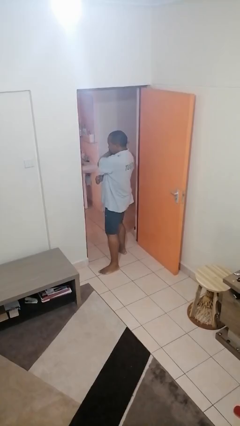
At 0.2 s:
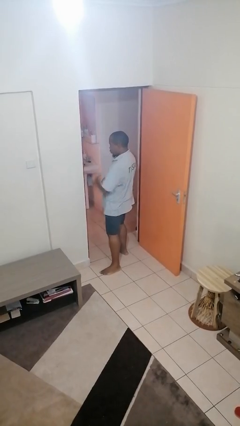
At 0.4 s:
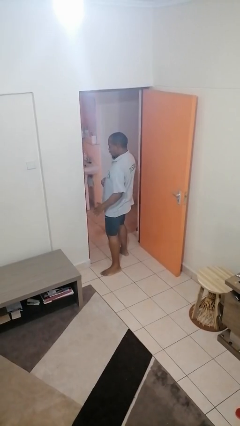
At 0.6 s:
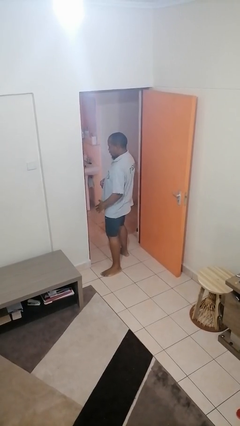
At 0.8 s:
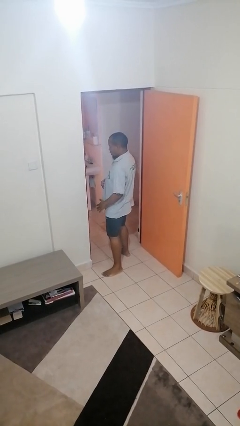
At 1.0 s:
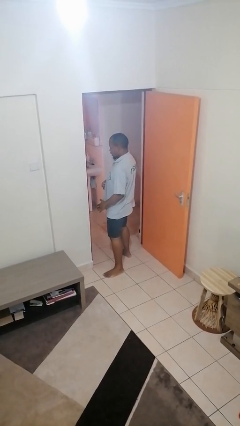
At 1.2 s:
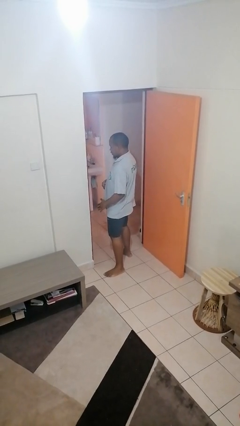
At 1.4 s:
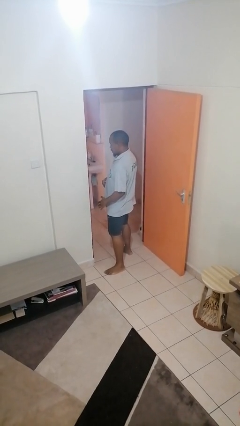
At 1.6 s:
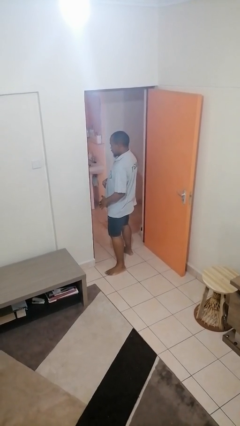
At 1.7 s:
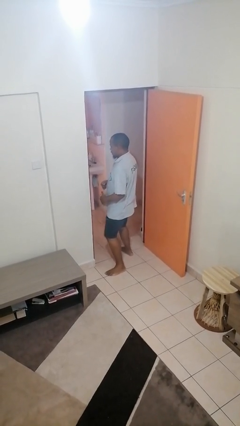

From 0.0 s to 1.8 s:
person karate chop

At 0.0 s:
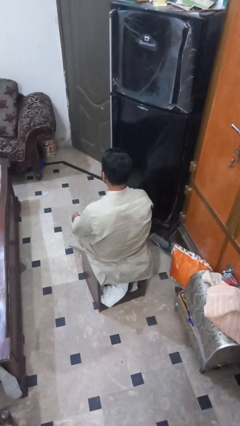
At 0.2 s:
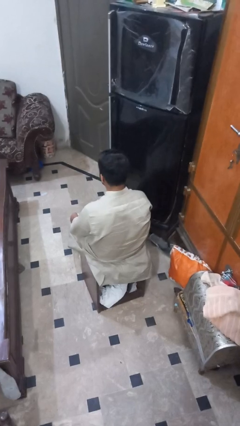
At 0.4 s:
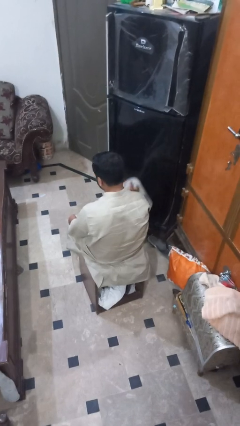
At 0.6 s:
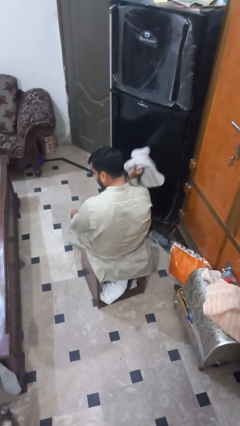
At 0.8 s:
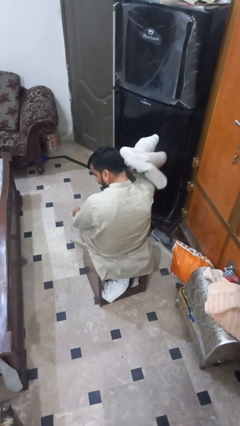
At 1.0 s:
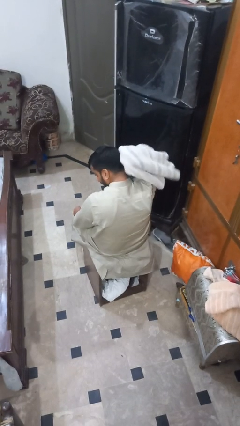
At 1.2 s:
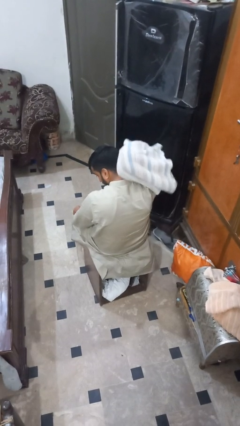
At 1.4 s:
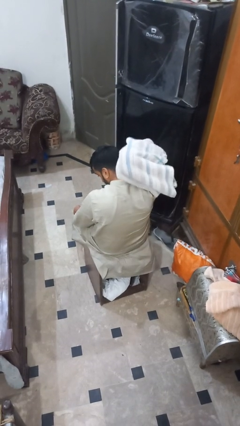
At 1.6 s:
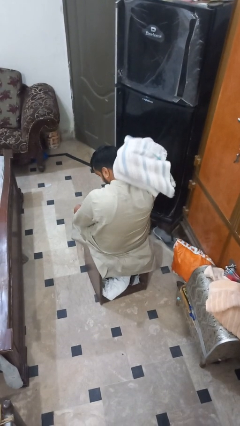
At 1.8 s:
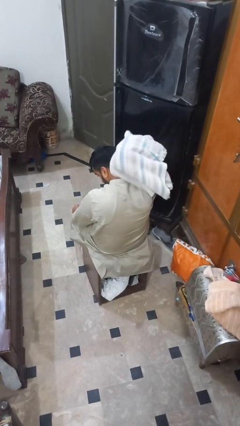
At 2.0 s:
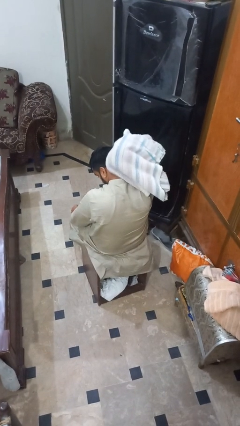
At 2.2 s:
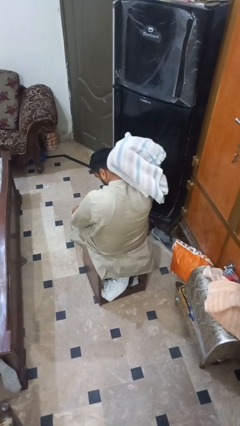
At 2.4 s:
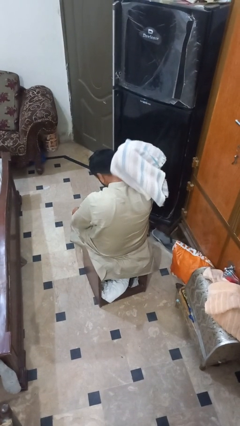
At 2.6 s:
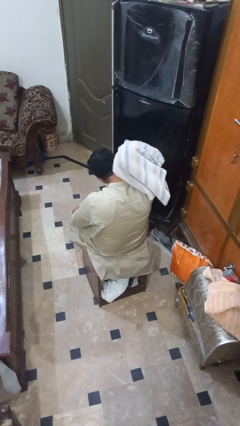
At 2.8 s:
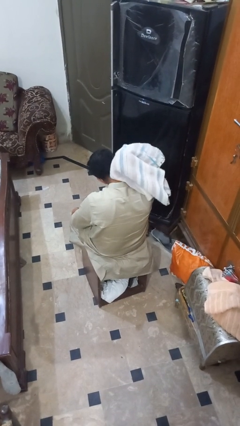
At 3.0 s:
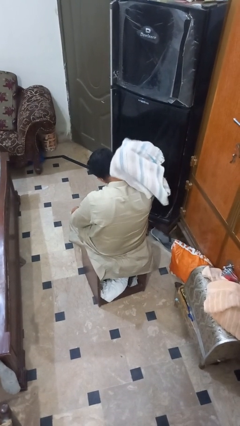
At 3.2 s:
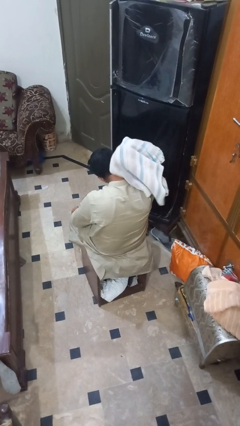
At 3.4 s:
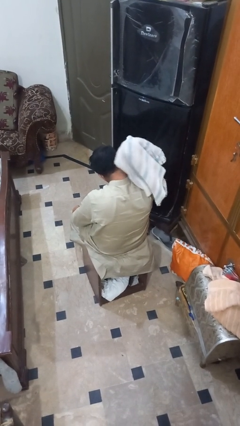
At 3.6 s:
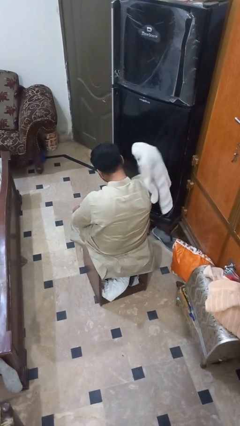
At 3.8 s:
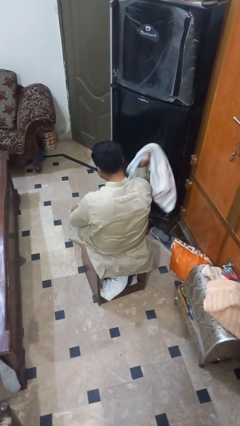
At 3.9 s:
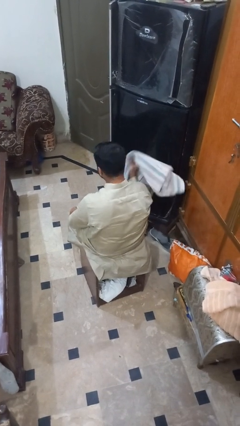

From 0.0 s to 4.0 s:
person dries hair with towel

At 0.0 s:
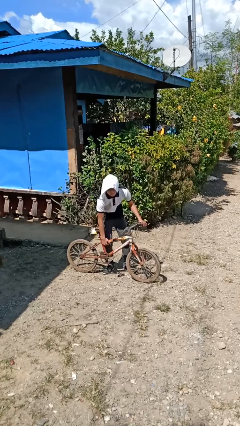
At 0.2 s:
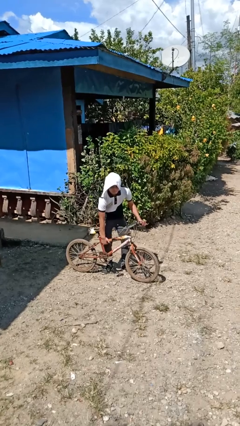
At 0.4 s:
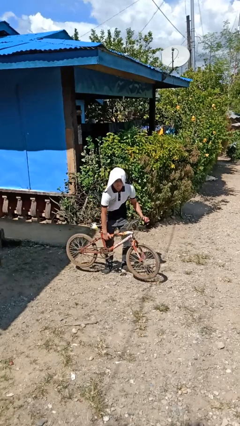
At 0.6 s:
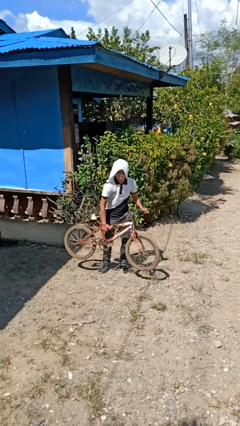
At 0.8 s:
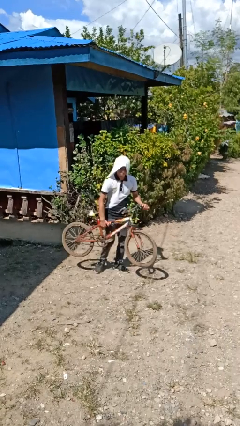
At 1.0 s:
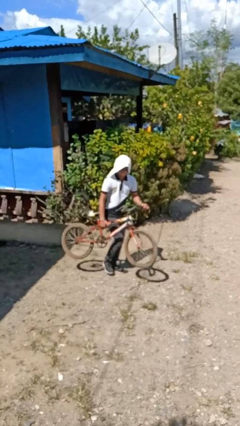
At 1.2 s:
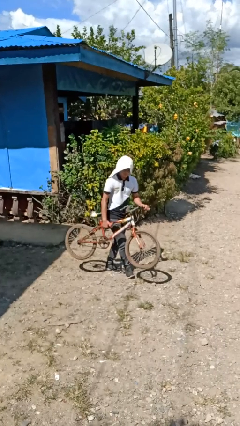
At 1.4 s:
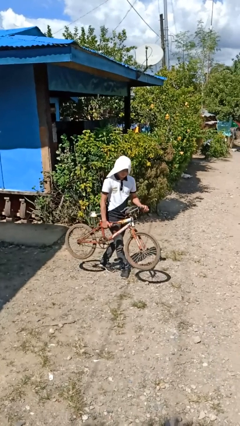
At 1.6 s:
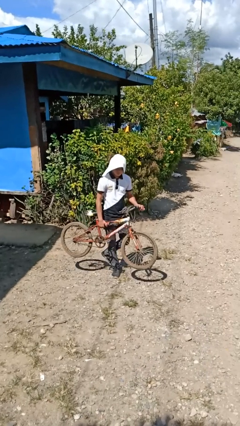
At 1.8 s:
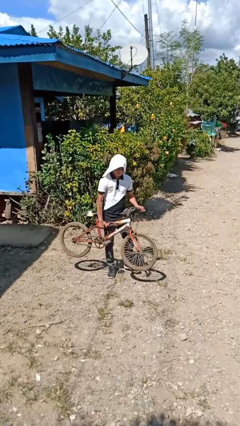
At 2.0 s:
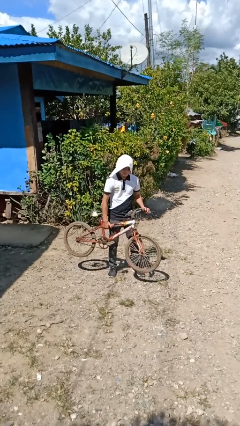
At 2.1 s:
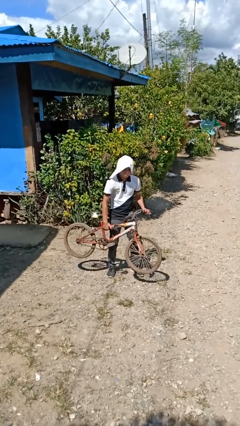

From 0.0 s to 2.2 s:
person carries bicycle

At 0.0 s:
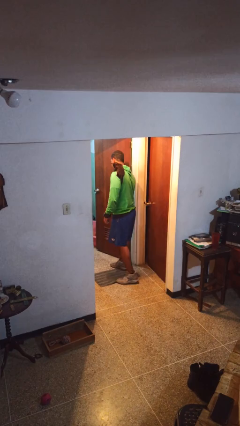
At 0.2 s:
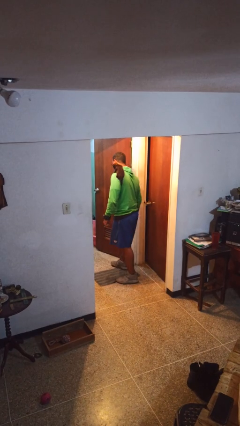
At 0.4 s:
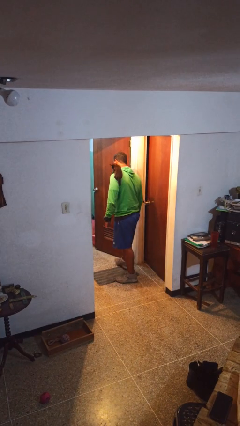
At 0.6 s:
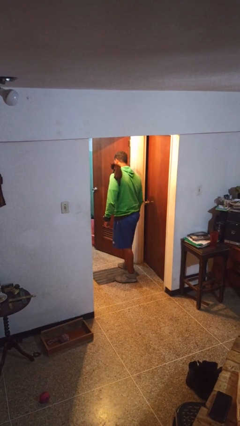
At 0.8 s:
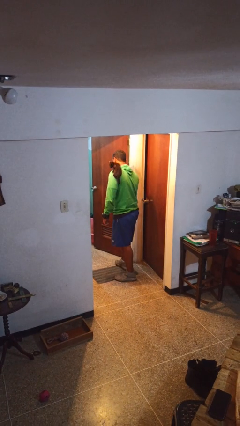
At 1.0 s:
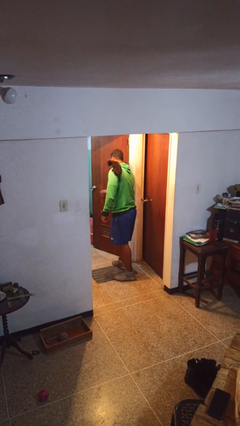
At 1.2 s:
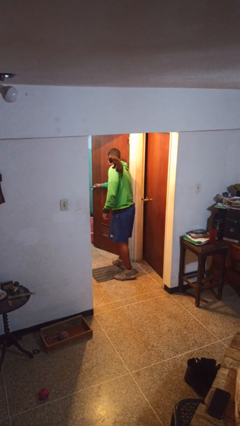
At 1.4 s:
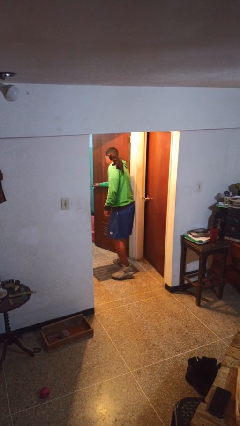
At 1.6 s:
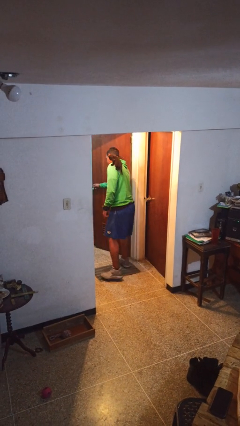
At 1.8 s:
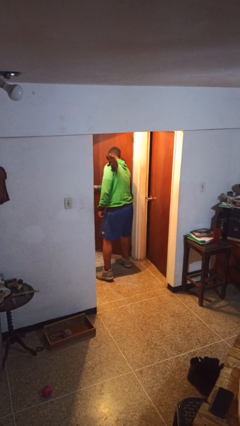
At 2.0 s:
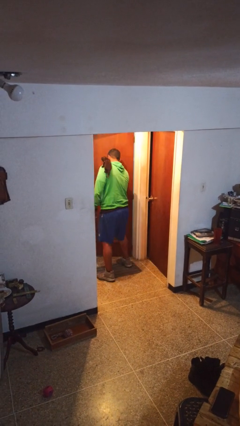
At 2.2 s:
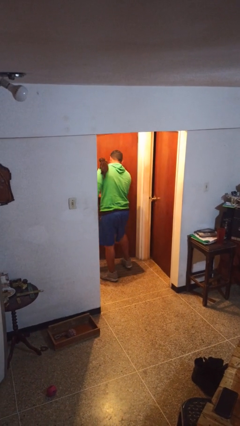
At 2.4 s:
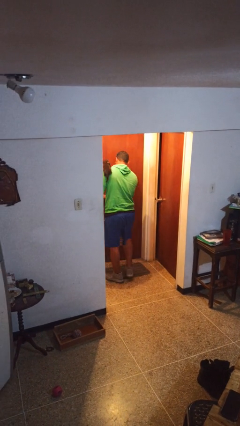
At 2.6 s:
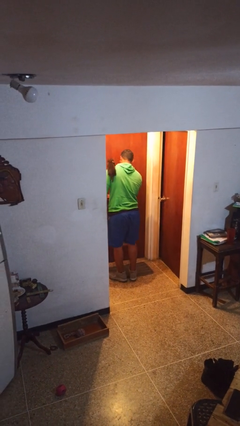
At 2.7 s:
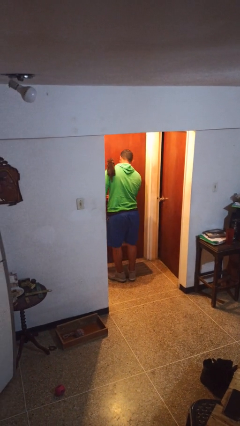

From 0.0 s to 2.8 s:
person closes facility door

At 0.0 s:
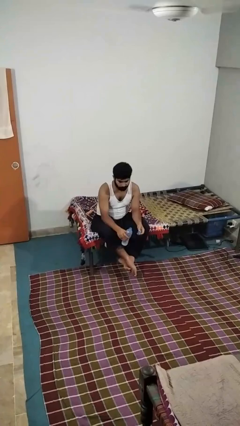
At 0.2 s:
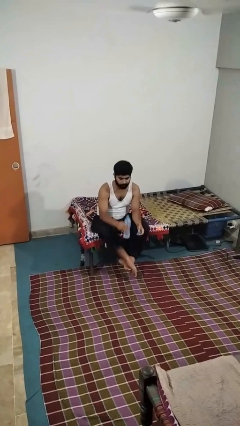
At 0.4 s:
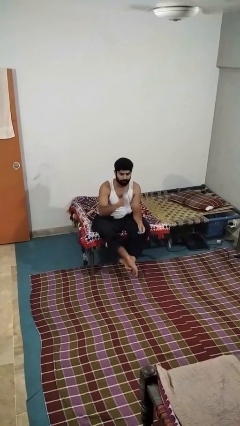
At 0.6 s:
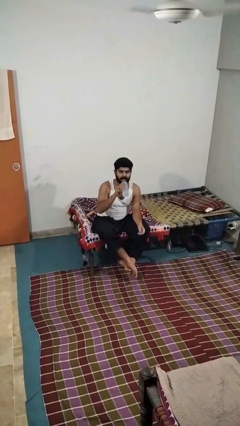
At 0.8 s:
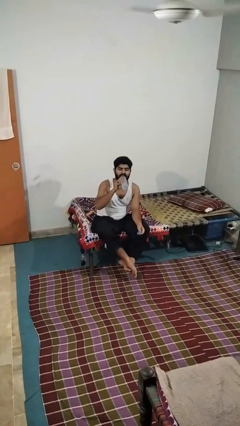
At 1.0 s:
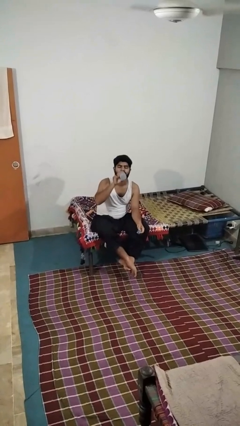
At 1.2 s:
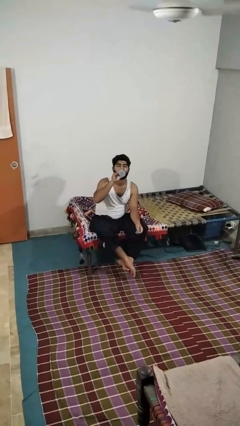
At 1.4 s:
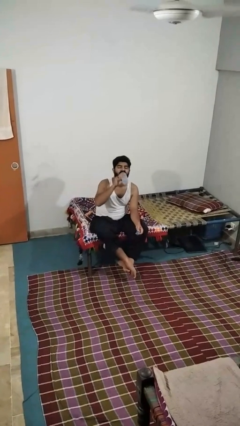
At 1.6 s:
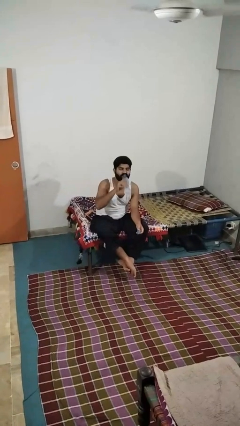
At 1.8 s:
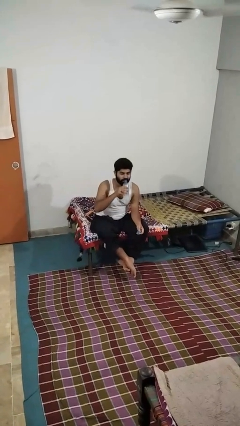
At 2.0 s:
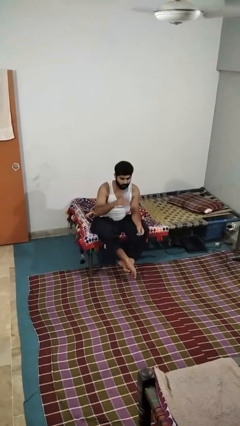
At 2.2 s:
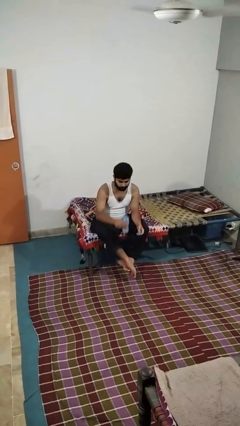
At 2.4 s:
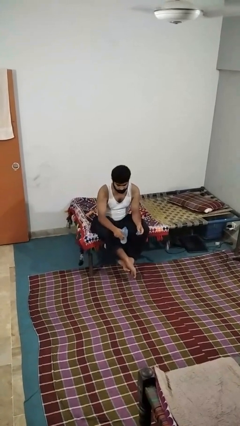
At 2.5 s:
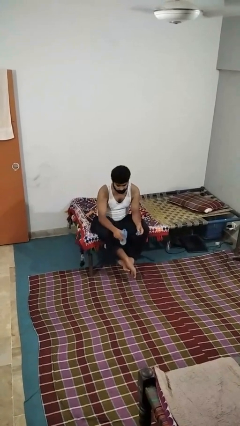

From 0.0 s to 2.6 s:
person drinks from bottle

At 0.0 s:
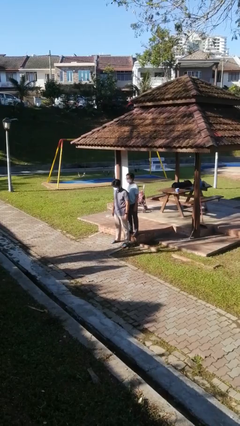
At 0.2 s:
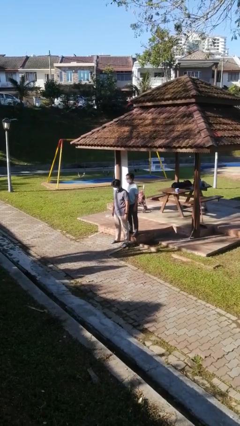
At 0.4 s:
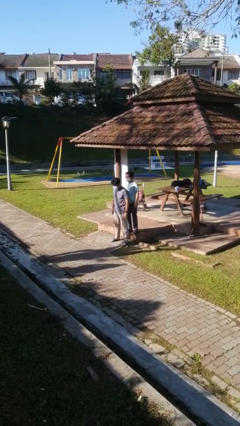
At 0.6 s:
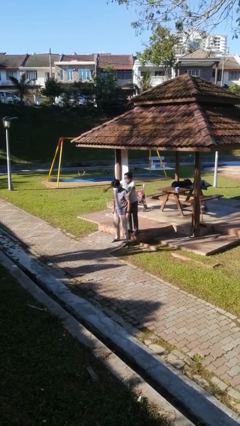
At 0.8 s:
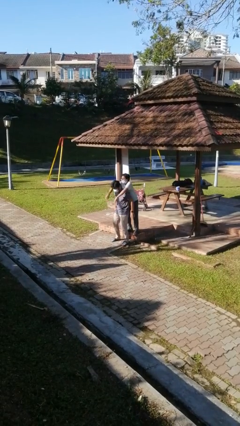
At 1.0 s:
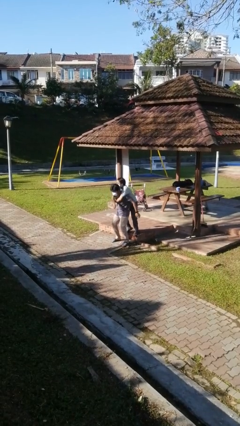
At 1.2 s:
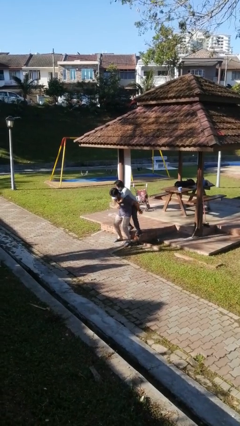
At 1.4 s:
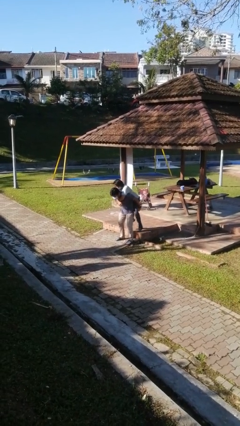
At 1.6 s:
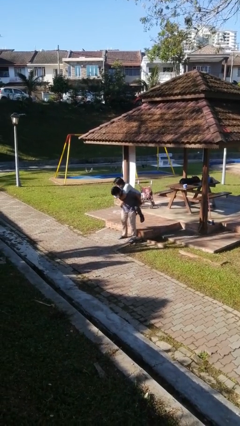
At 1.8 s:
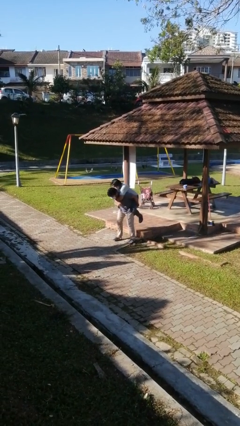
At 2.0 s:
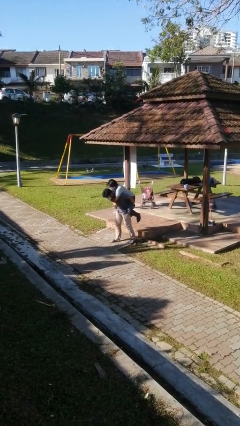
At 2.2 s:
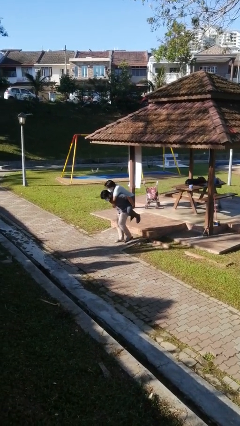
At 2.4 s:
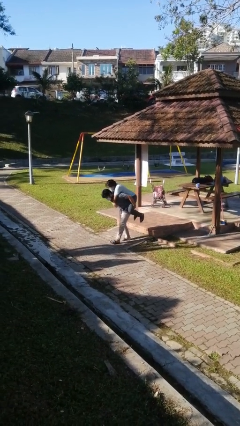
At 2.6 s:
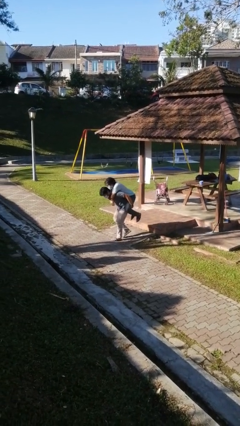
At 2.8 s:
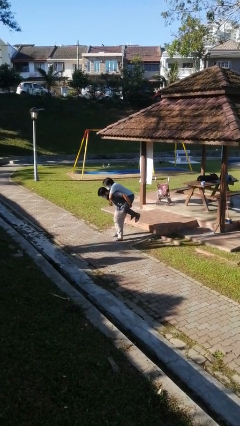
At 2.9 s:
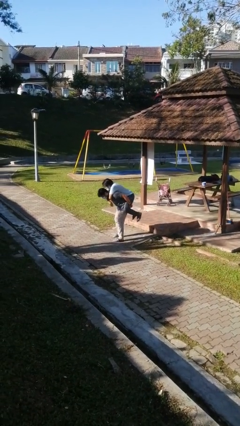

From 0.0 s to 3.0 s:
person carries person over shoulder

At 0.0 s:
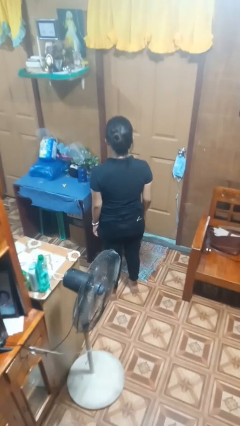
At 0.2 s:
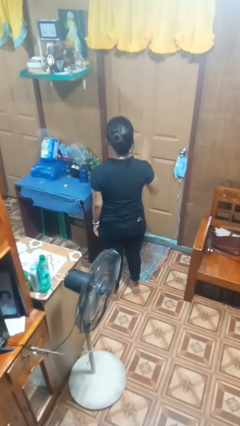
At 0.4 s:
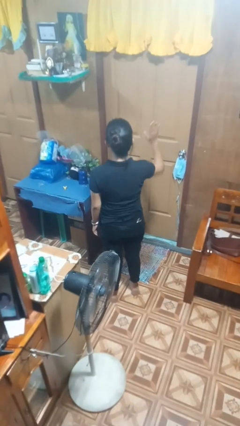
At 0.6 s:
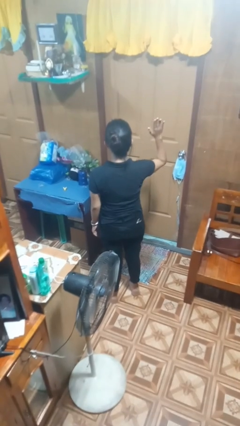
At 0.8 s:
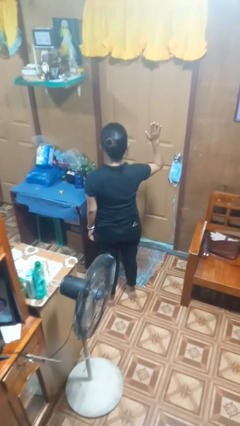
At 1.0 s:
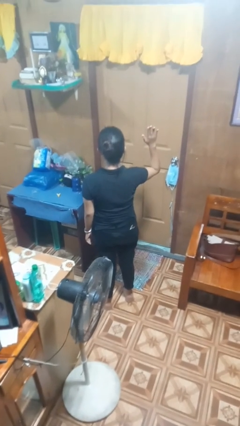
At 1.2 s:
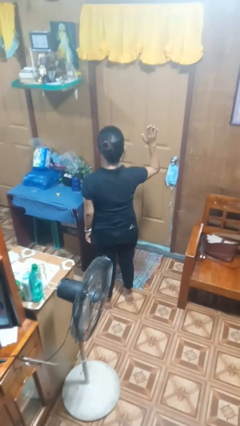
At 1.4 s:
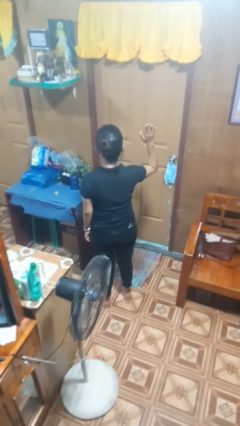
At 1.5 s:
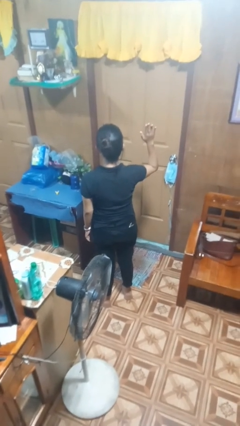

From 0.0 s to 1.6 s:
person gestures raise hand
